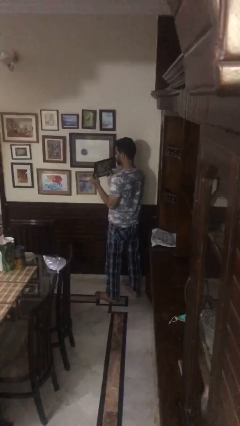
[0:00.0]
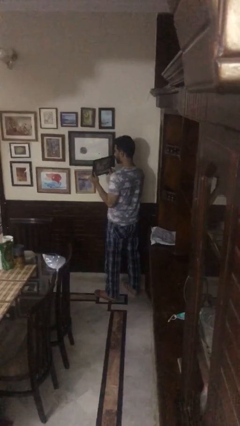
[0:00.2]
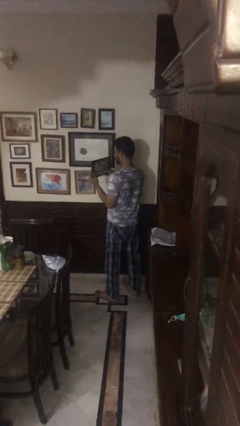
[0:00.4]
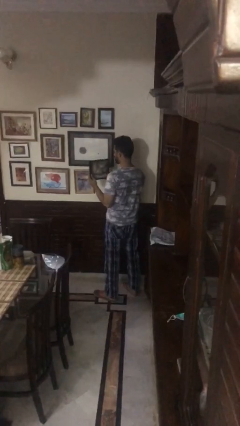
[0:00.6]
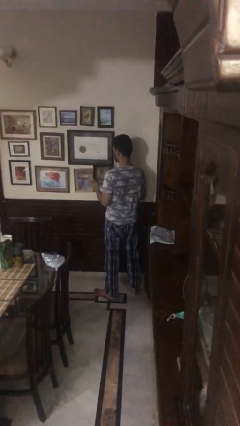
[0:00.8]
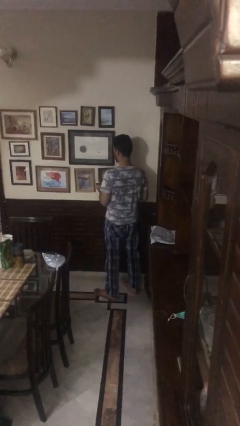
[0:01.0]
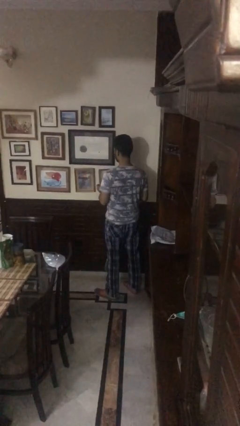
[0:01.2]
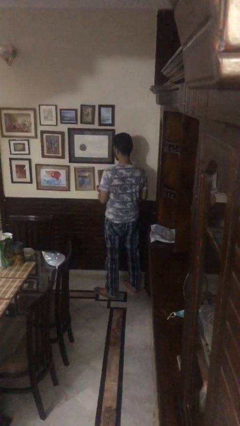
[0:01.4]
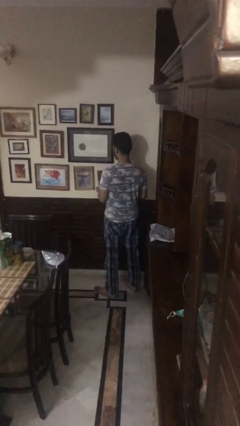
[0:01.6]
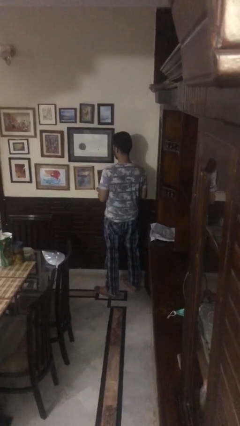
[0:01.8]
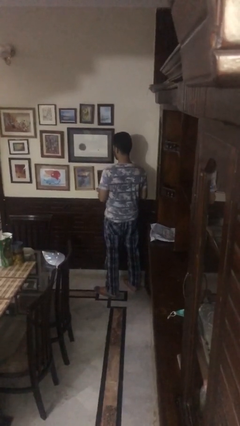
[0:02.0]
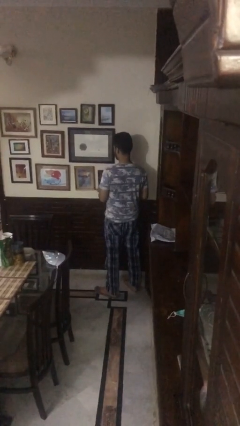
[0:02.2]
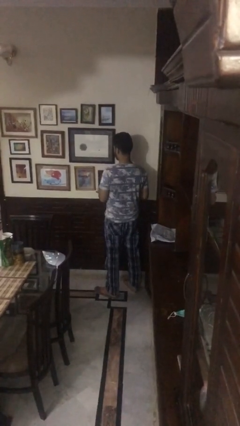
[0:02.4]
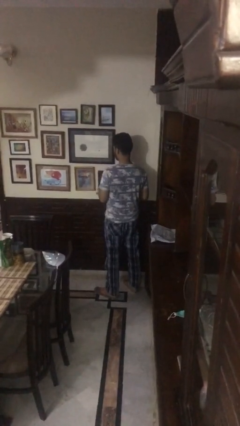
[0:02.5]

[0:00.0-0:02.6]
person puts up picture frame

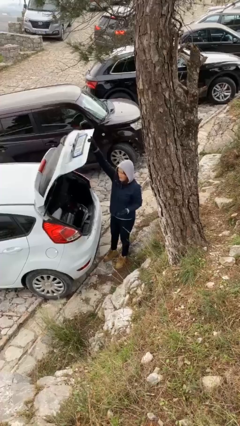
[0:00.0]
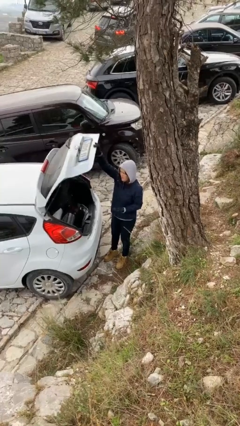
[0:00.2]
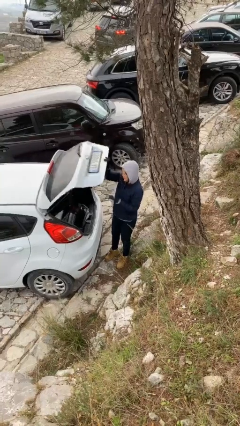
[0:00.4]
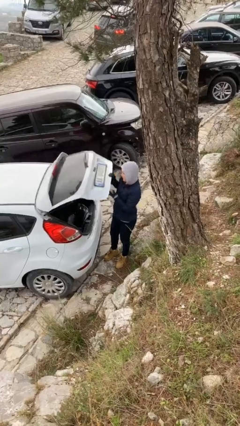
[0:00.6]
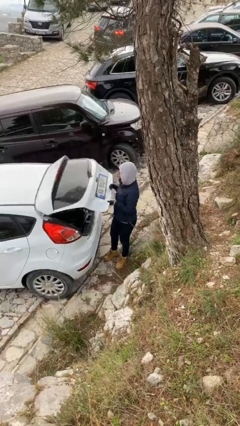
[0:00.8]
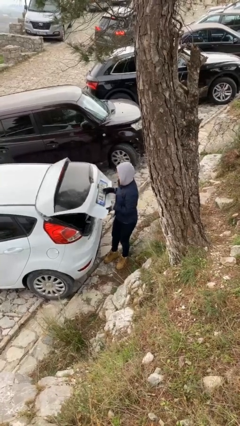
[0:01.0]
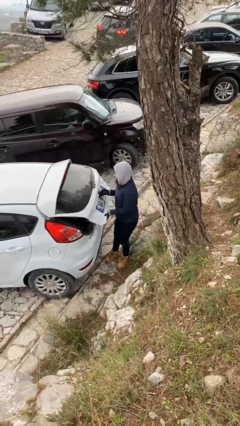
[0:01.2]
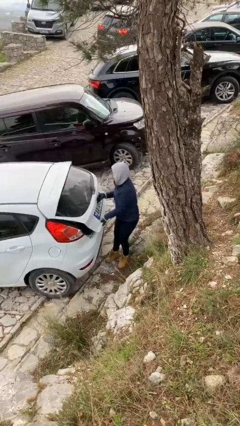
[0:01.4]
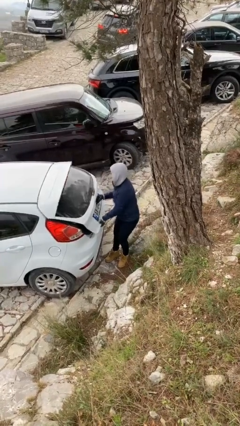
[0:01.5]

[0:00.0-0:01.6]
person closes car trunk

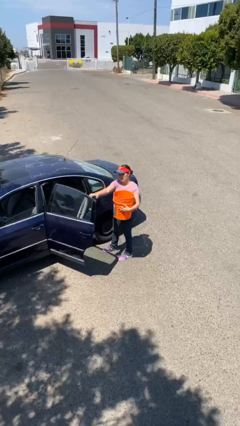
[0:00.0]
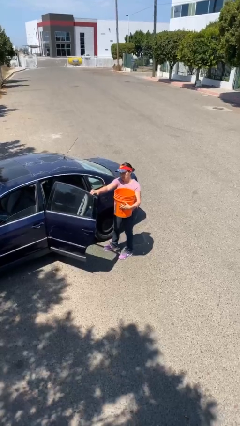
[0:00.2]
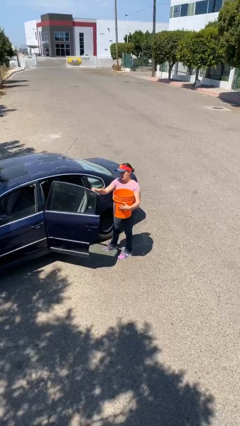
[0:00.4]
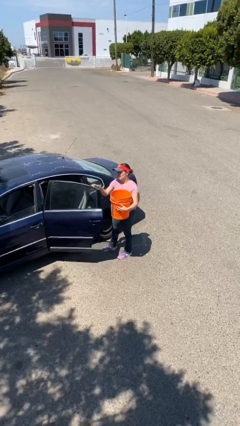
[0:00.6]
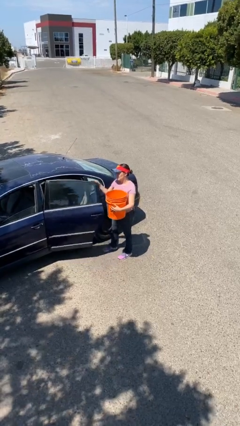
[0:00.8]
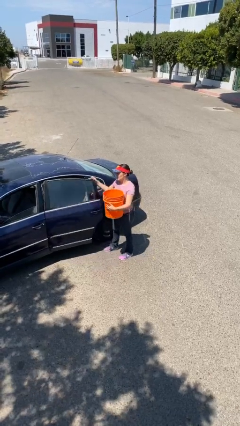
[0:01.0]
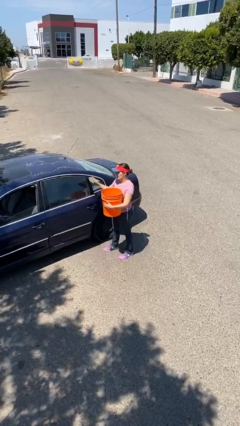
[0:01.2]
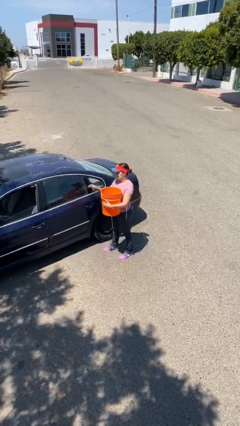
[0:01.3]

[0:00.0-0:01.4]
person closes car door

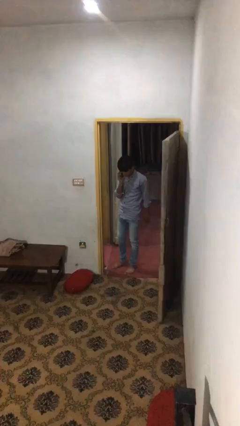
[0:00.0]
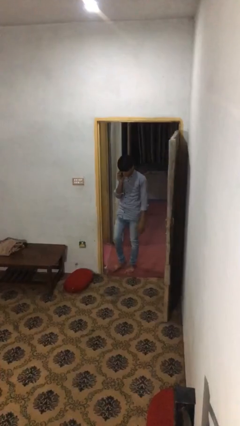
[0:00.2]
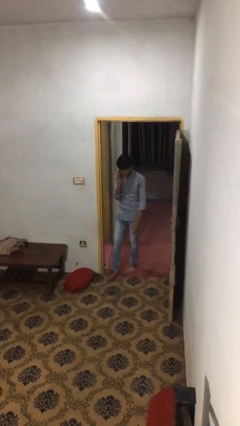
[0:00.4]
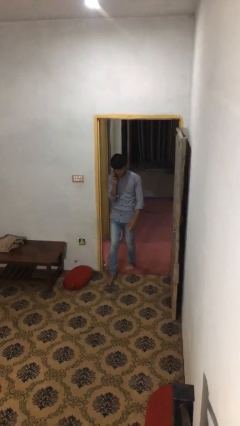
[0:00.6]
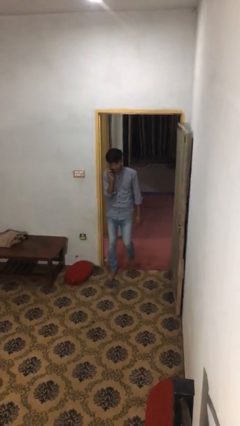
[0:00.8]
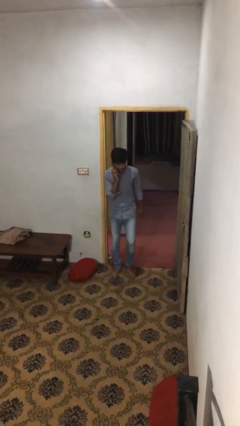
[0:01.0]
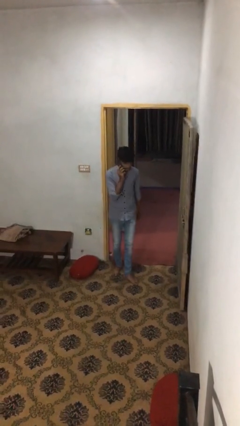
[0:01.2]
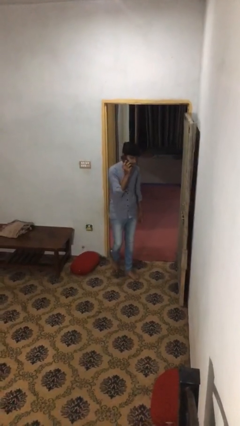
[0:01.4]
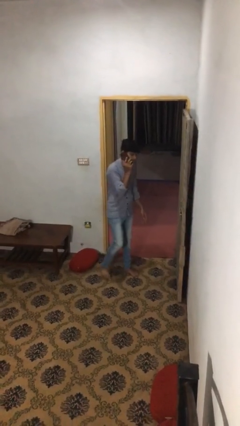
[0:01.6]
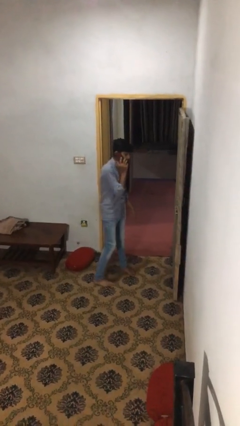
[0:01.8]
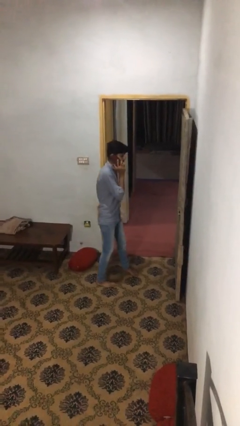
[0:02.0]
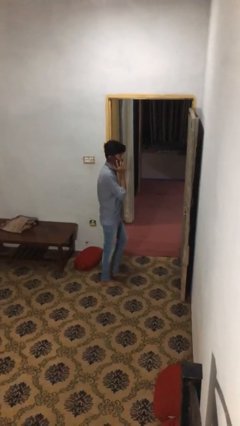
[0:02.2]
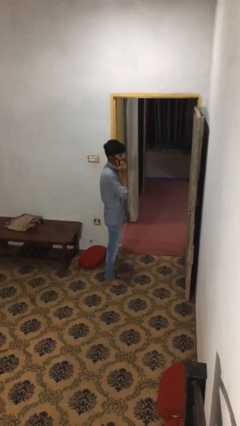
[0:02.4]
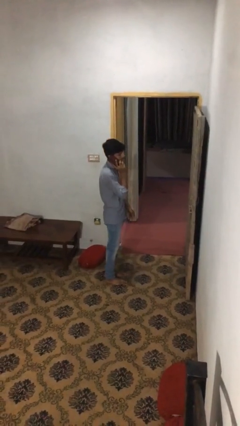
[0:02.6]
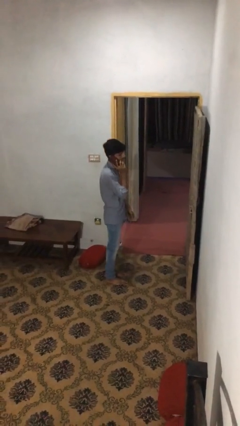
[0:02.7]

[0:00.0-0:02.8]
person enters scene through structure

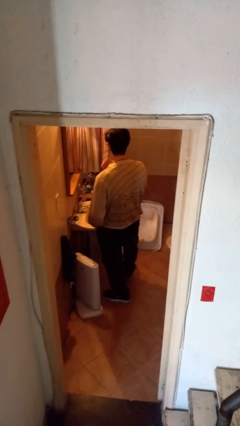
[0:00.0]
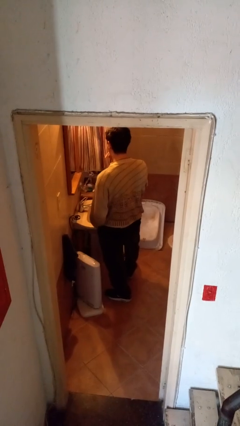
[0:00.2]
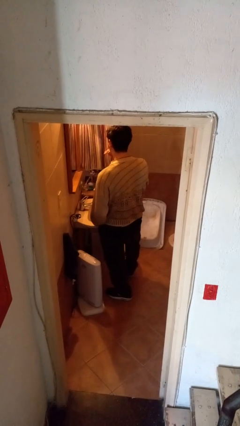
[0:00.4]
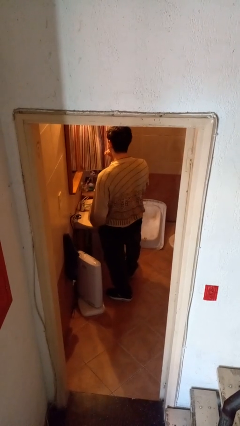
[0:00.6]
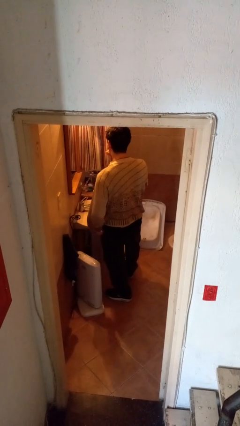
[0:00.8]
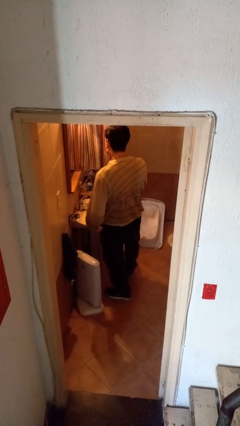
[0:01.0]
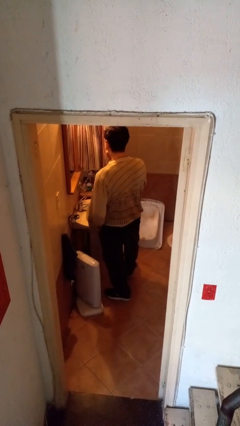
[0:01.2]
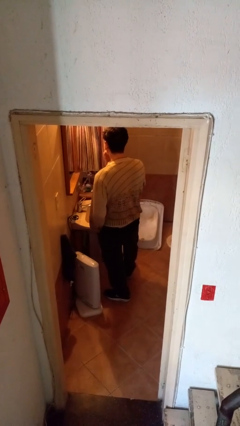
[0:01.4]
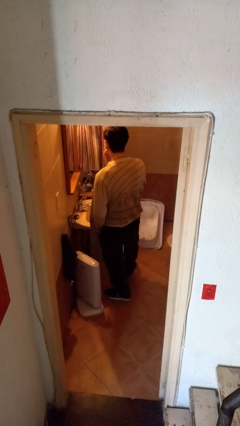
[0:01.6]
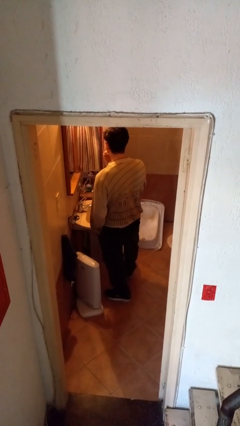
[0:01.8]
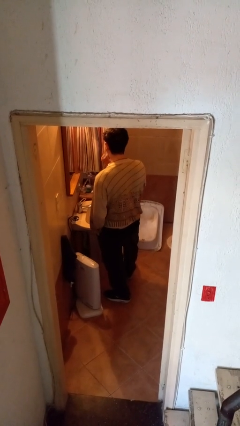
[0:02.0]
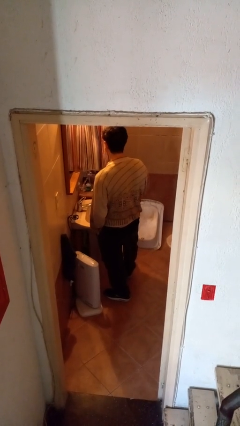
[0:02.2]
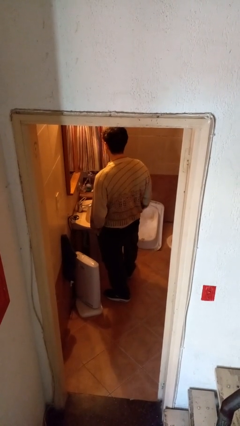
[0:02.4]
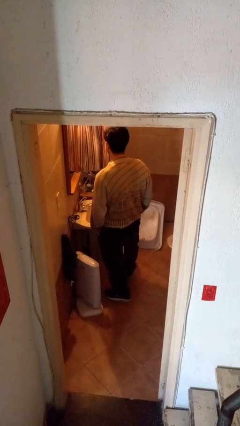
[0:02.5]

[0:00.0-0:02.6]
person brushes teeth

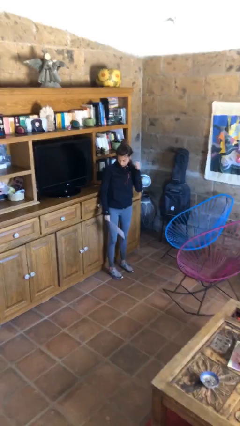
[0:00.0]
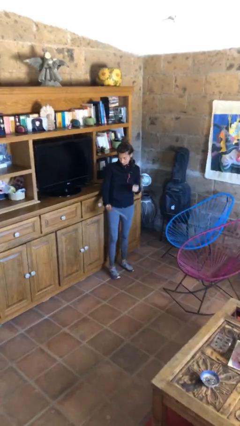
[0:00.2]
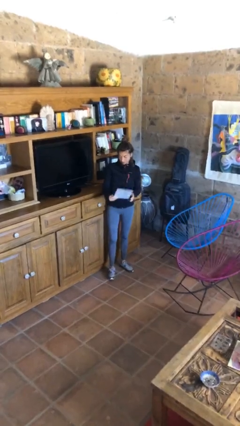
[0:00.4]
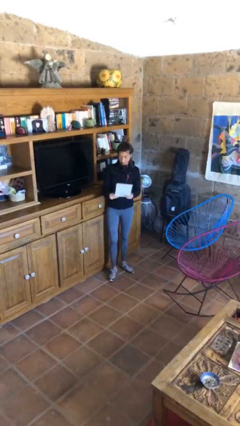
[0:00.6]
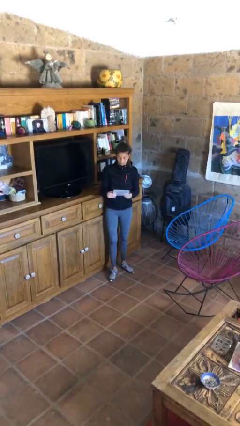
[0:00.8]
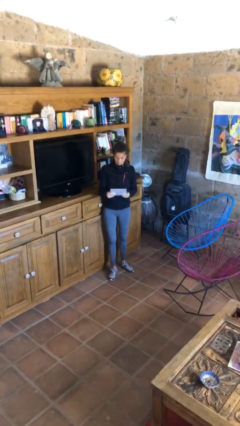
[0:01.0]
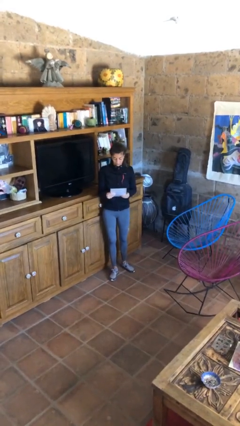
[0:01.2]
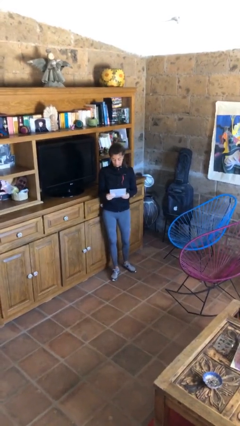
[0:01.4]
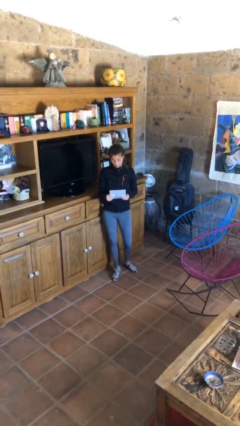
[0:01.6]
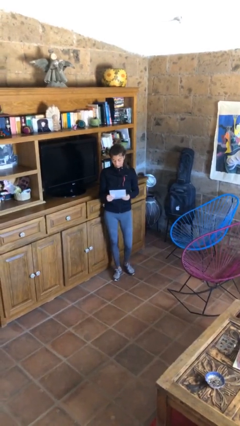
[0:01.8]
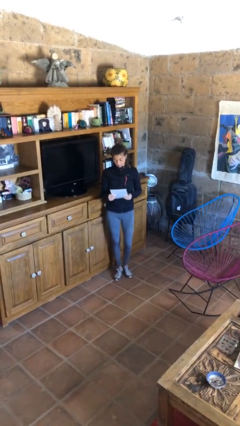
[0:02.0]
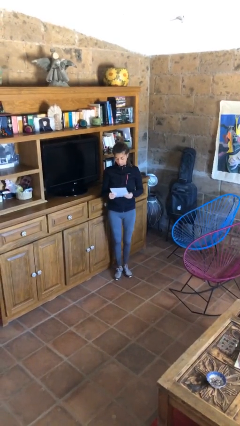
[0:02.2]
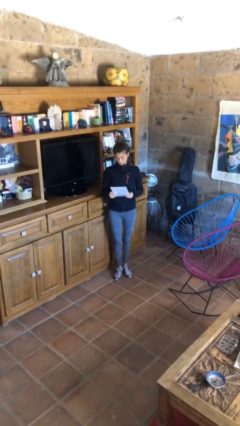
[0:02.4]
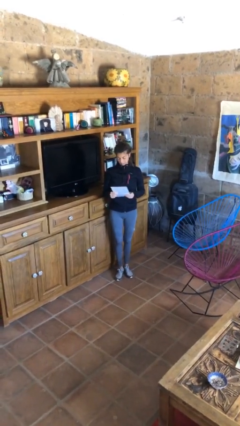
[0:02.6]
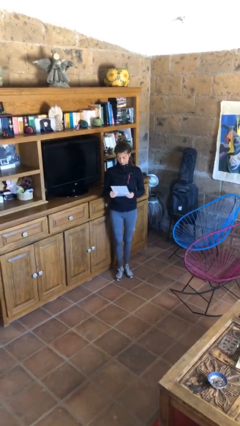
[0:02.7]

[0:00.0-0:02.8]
person reads document

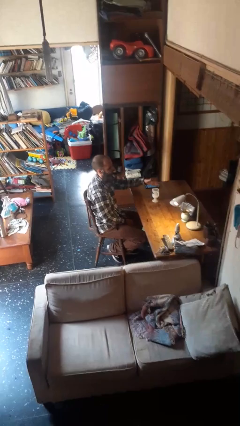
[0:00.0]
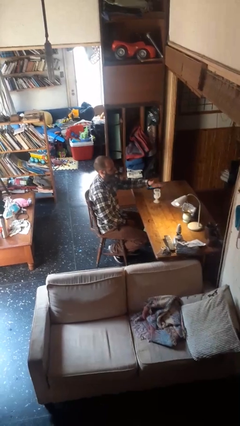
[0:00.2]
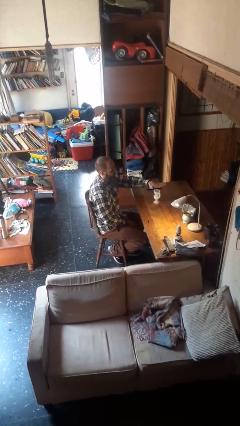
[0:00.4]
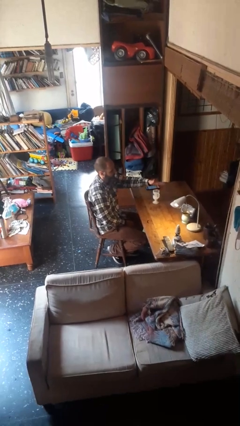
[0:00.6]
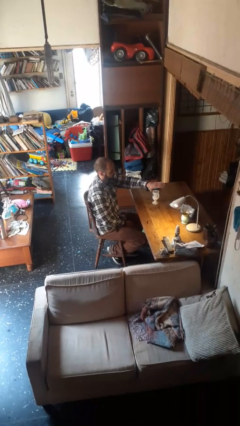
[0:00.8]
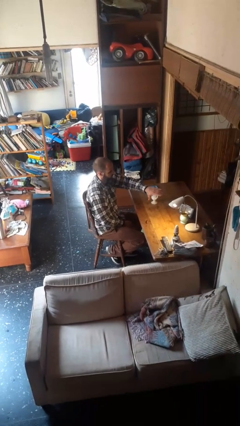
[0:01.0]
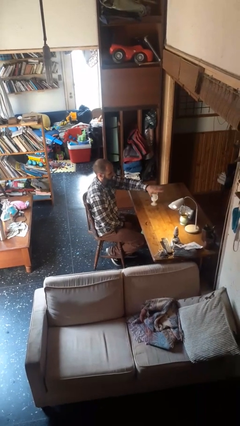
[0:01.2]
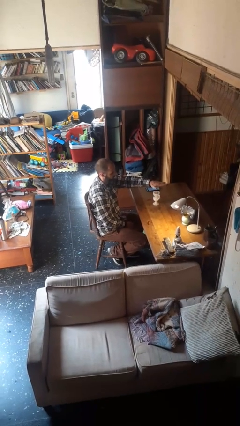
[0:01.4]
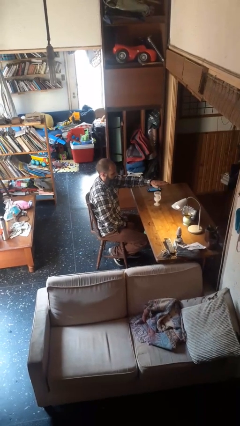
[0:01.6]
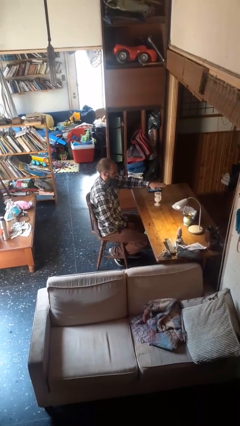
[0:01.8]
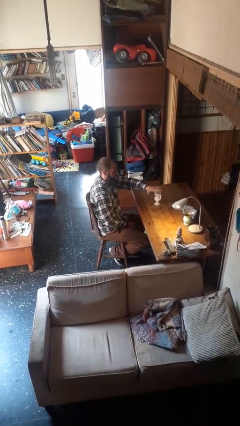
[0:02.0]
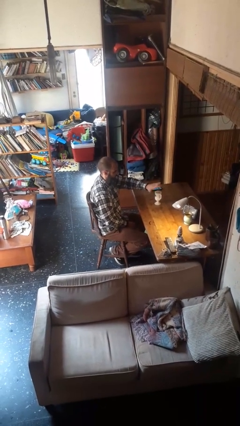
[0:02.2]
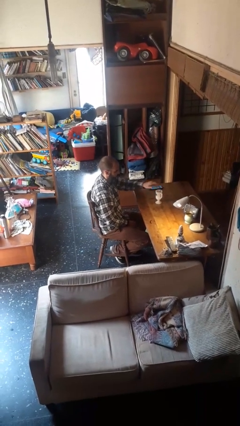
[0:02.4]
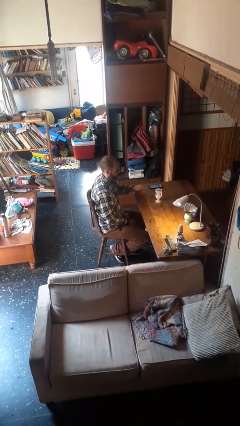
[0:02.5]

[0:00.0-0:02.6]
person waves hand over object

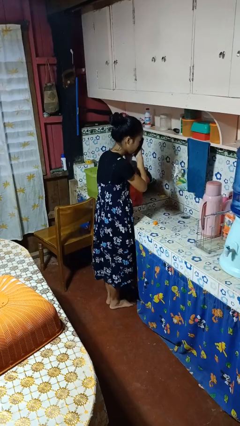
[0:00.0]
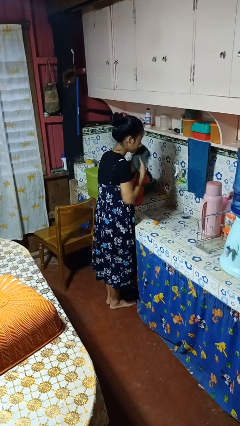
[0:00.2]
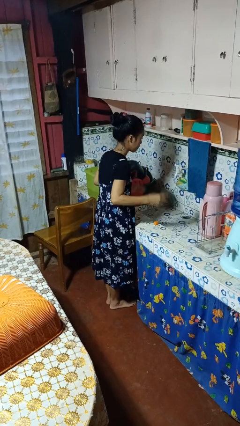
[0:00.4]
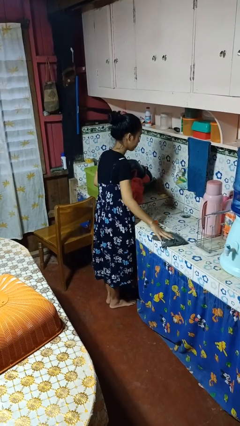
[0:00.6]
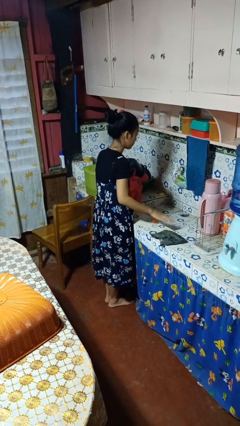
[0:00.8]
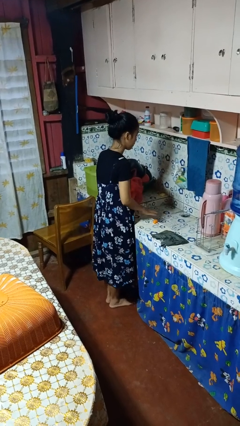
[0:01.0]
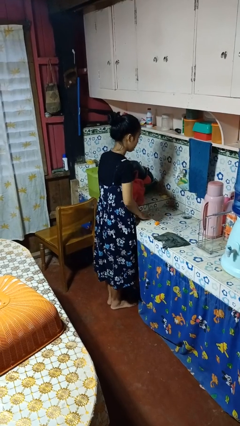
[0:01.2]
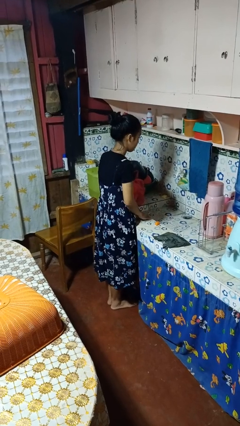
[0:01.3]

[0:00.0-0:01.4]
person dries face with towel
